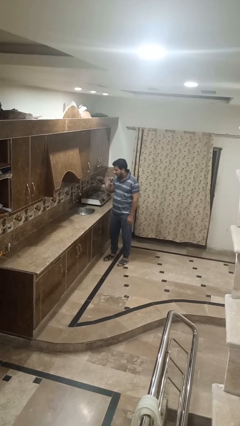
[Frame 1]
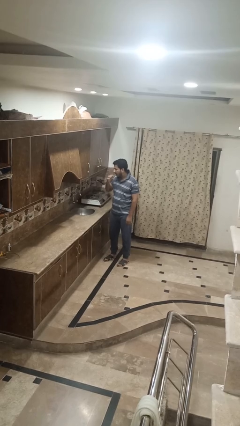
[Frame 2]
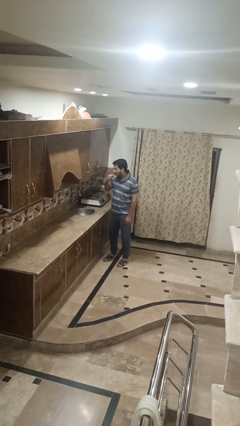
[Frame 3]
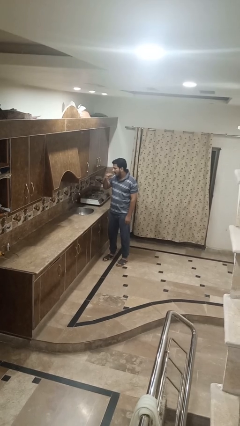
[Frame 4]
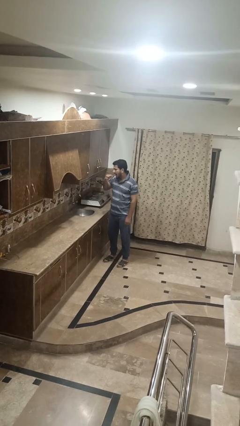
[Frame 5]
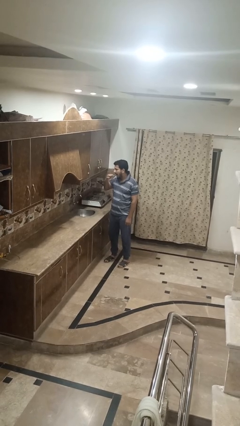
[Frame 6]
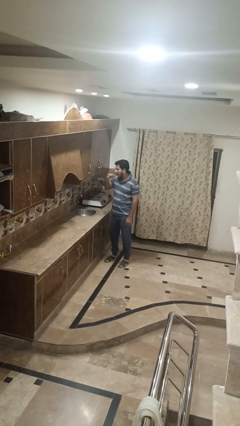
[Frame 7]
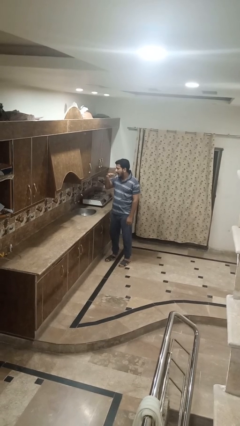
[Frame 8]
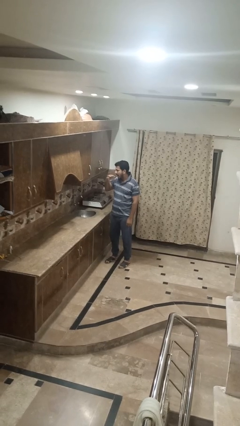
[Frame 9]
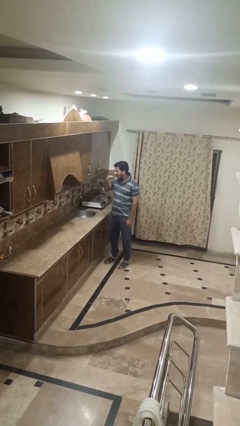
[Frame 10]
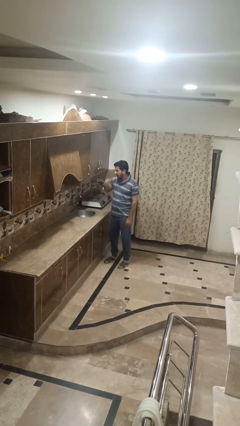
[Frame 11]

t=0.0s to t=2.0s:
person brushes teeth

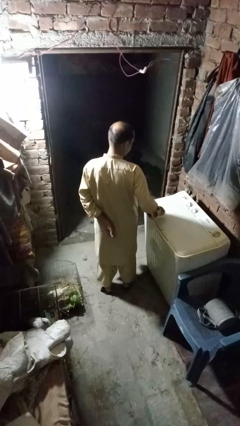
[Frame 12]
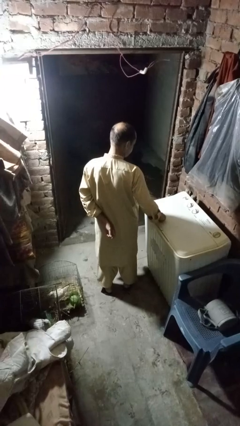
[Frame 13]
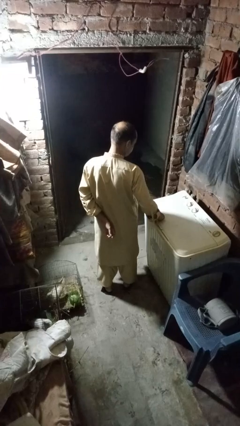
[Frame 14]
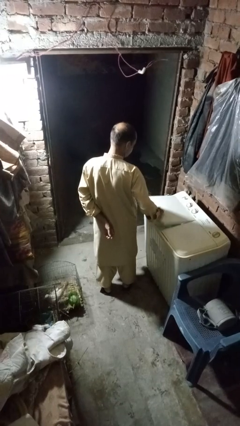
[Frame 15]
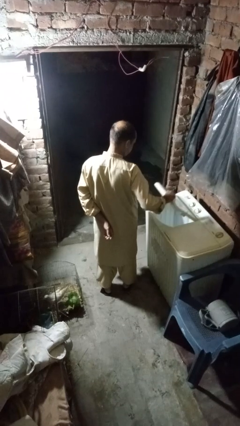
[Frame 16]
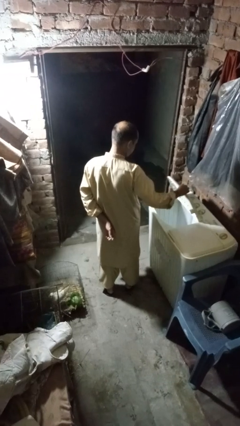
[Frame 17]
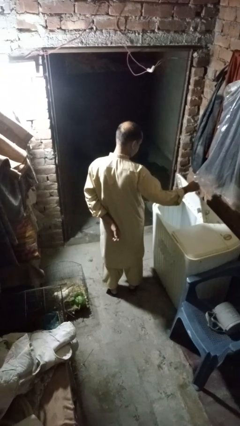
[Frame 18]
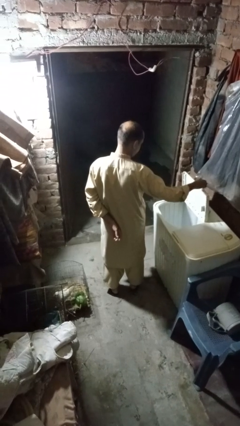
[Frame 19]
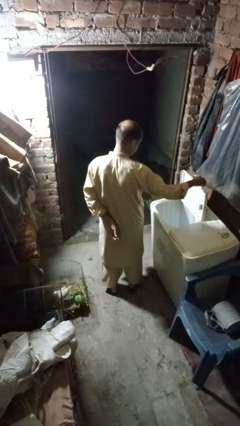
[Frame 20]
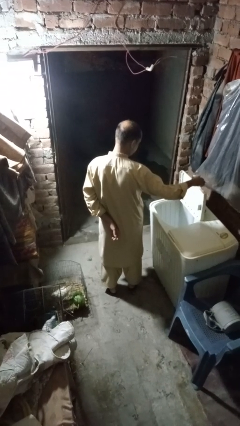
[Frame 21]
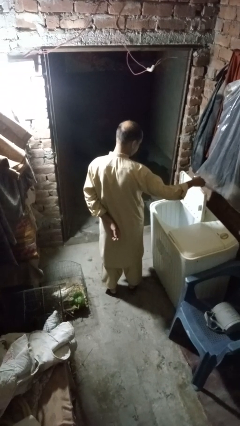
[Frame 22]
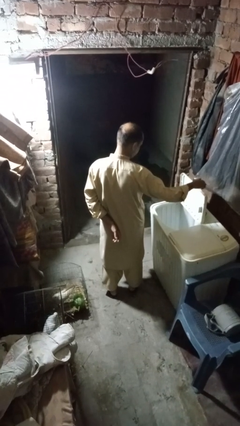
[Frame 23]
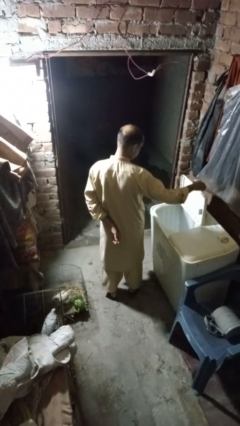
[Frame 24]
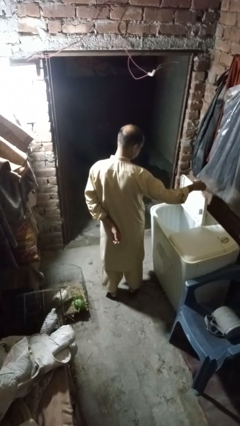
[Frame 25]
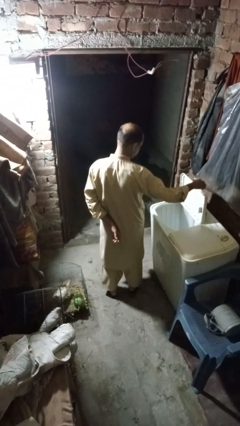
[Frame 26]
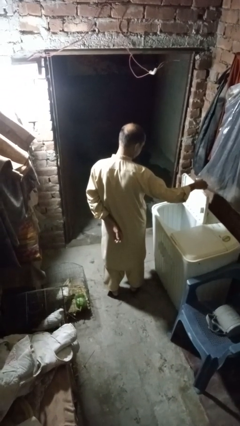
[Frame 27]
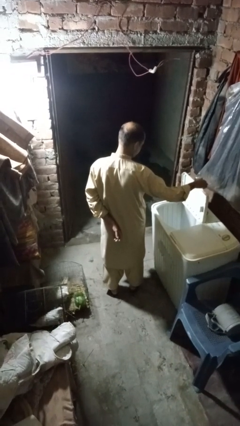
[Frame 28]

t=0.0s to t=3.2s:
person opens clothes washer

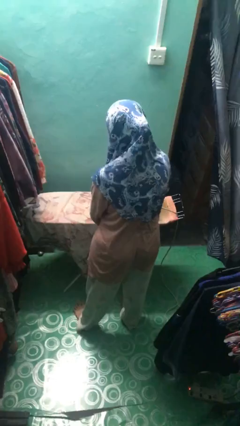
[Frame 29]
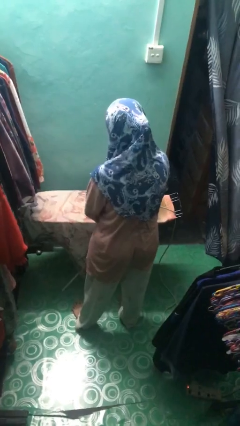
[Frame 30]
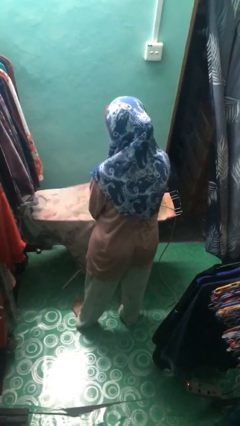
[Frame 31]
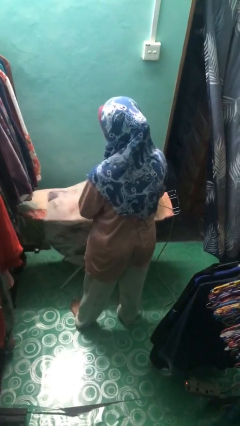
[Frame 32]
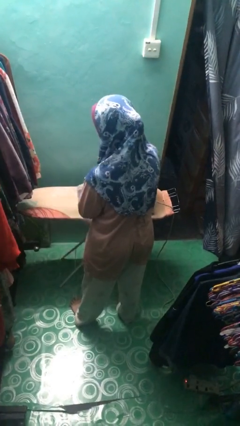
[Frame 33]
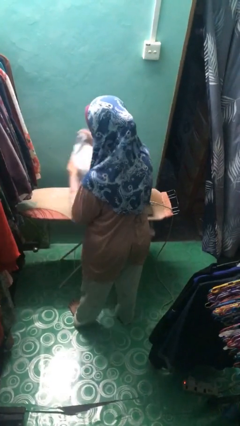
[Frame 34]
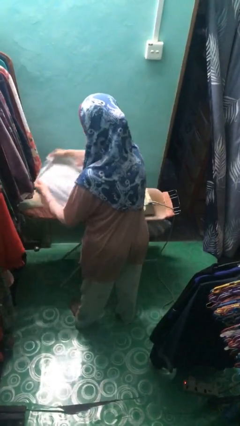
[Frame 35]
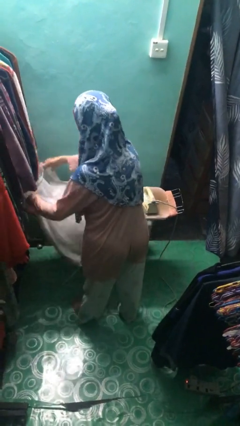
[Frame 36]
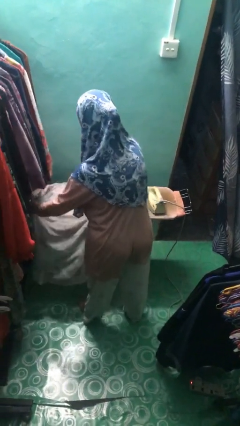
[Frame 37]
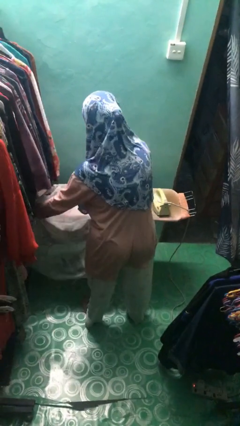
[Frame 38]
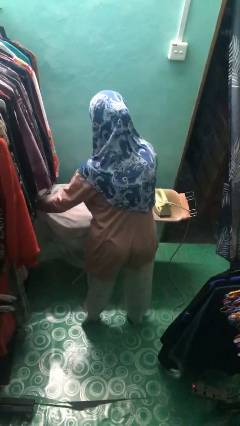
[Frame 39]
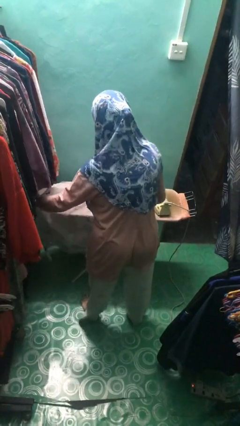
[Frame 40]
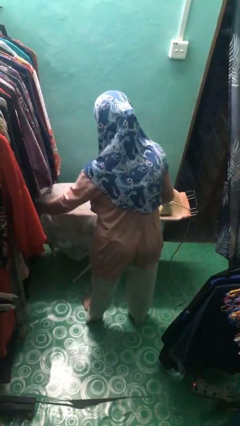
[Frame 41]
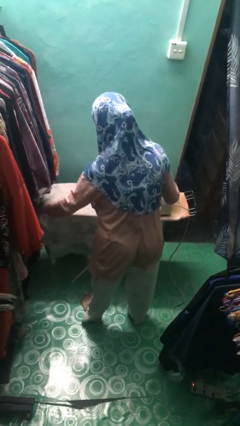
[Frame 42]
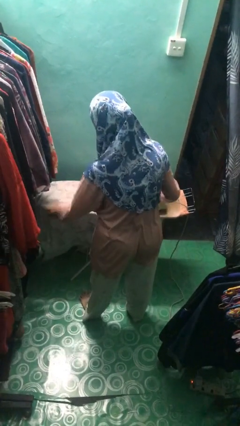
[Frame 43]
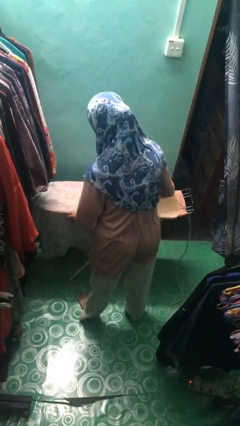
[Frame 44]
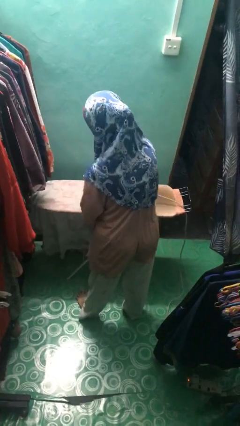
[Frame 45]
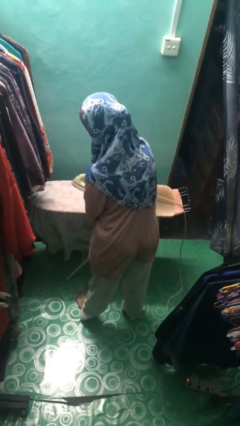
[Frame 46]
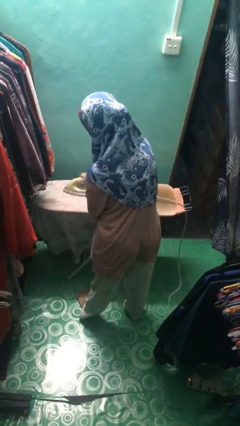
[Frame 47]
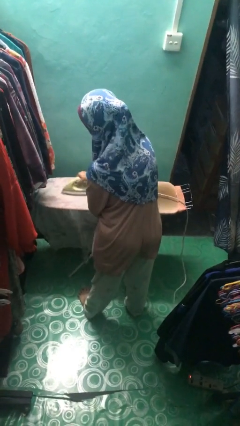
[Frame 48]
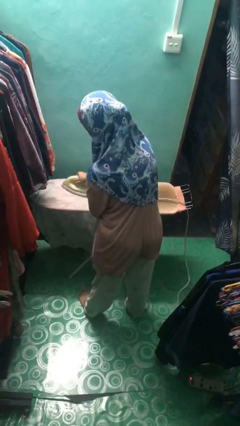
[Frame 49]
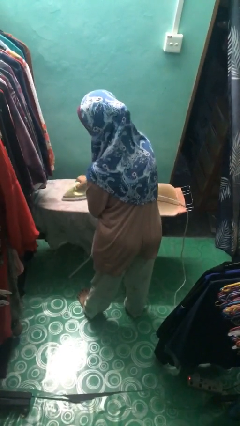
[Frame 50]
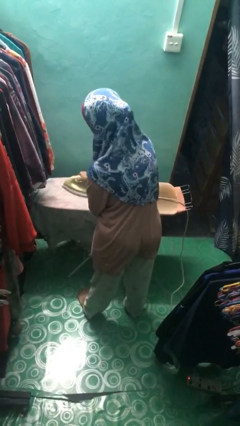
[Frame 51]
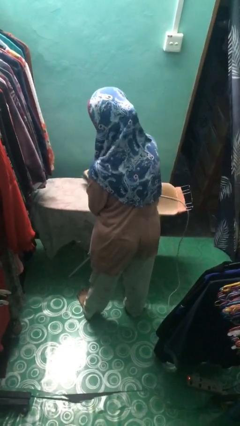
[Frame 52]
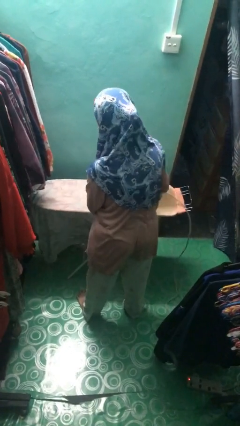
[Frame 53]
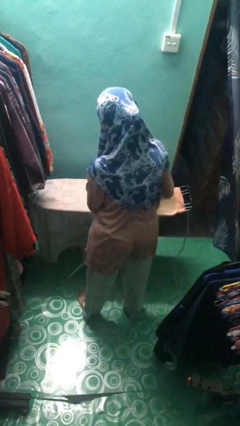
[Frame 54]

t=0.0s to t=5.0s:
person irons clothes

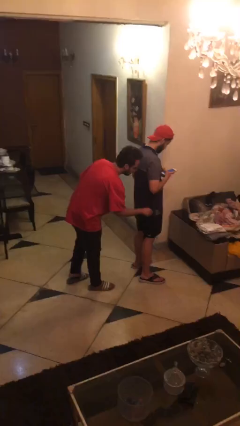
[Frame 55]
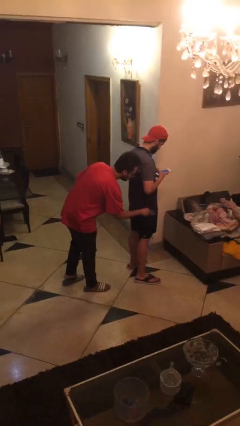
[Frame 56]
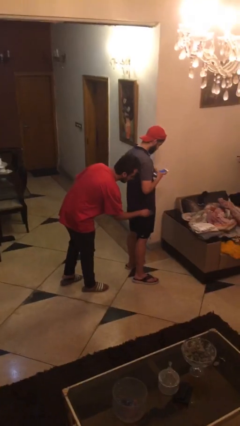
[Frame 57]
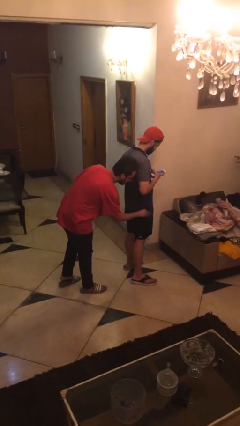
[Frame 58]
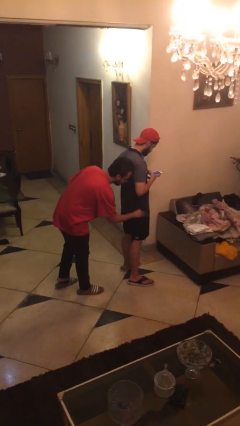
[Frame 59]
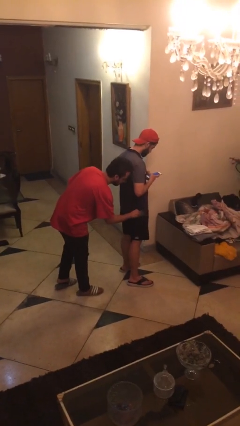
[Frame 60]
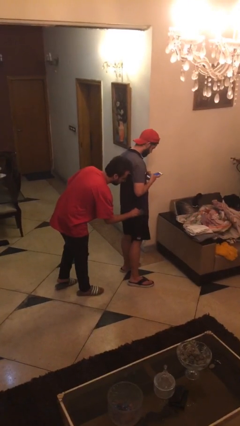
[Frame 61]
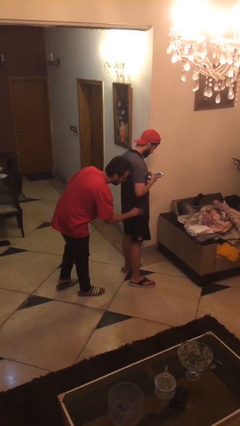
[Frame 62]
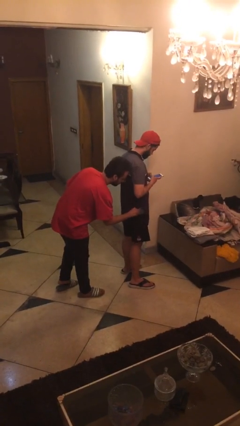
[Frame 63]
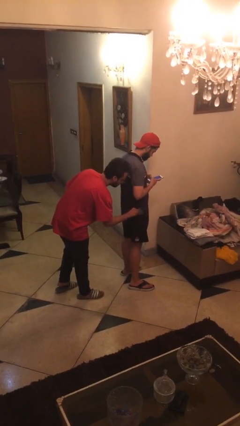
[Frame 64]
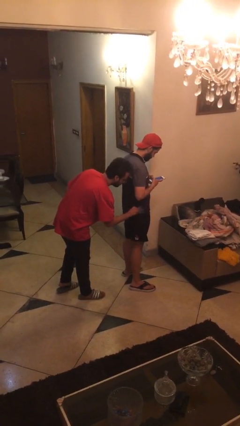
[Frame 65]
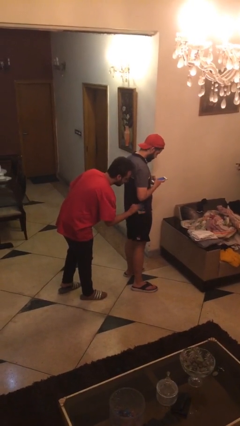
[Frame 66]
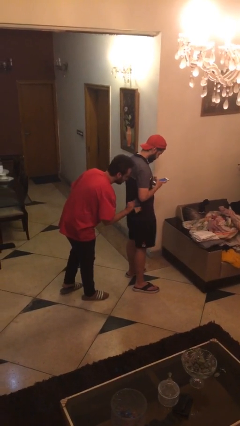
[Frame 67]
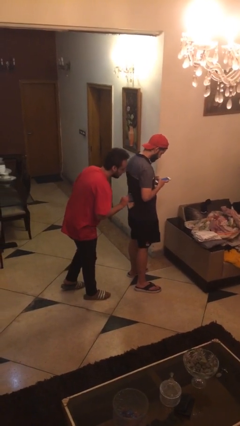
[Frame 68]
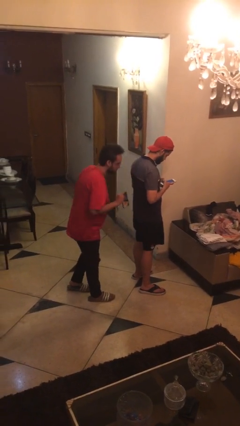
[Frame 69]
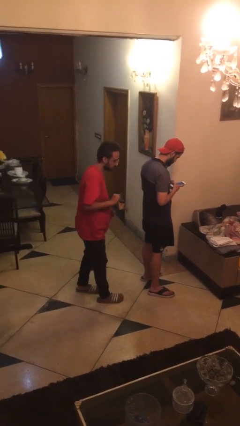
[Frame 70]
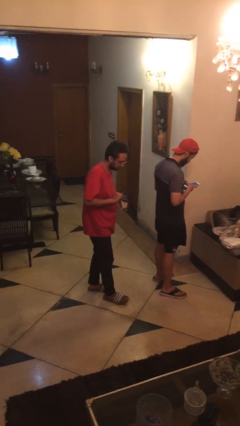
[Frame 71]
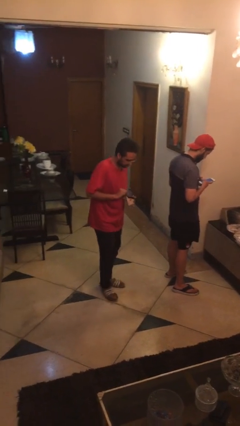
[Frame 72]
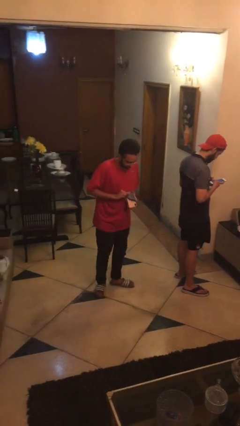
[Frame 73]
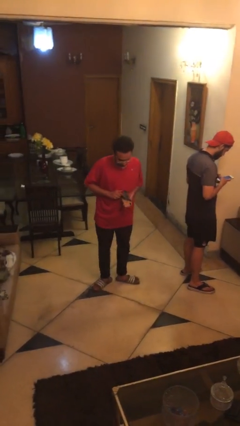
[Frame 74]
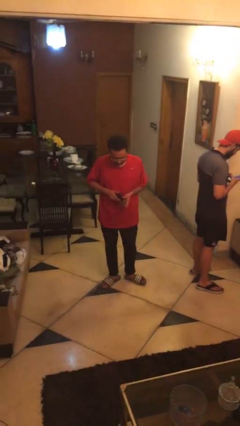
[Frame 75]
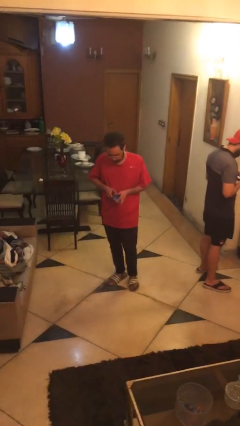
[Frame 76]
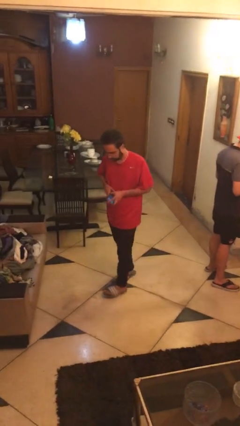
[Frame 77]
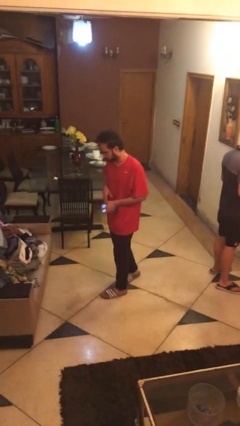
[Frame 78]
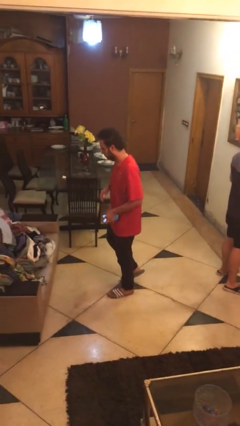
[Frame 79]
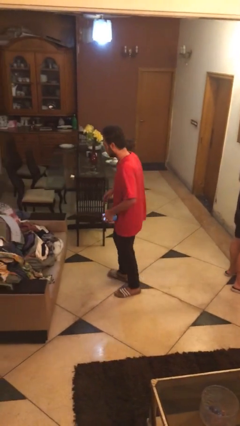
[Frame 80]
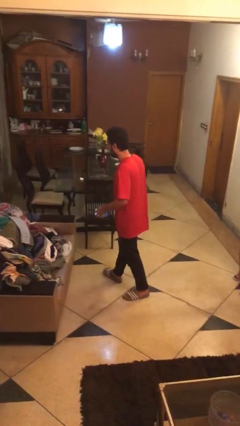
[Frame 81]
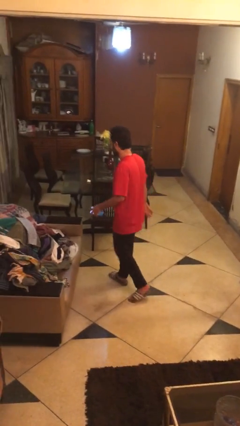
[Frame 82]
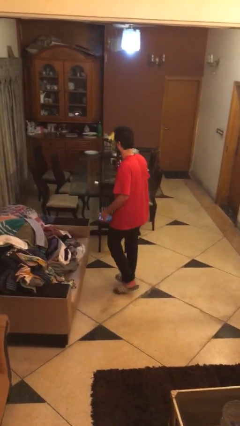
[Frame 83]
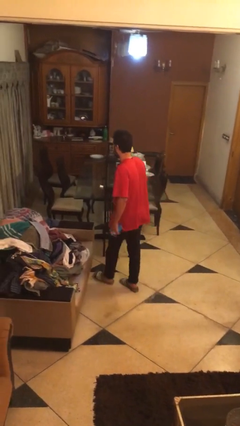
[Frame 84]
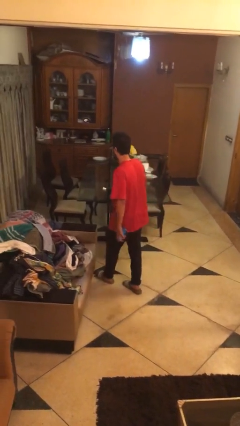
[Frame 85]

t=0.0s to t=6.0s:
person steals object from person

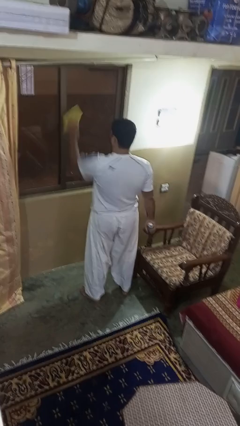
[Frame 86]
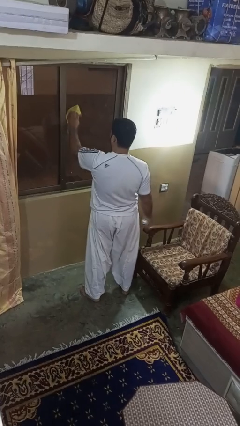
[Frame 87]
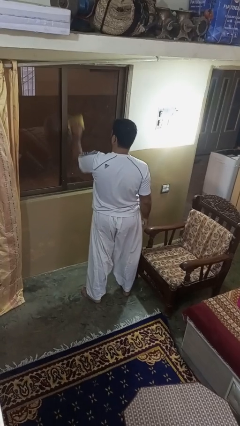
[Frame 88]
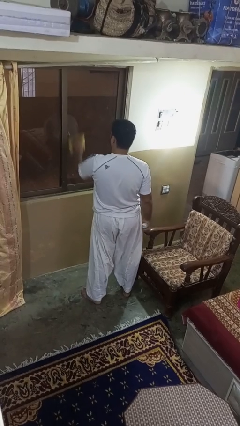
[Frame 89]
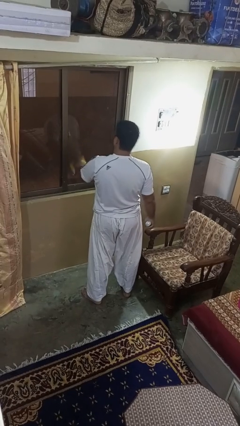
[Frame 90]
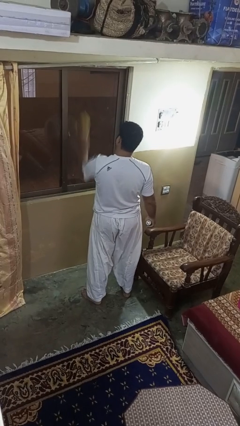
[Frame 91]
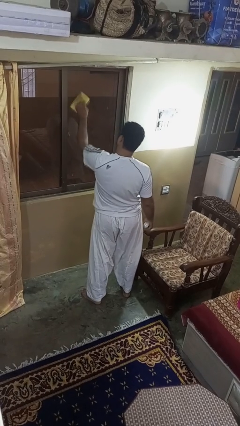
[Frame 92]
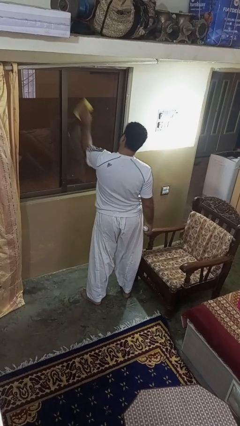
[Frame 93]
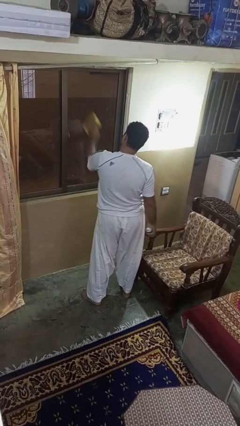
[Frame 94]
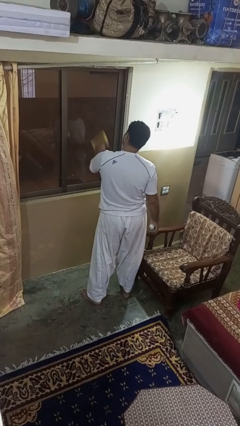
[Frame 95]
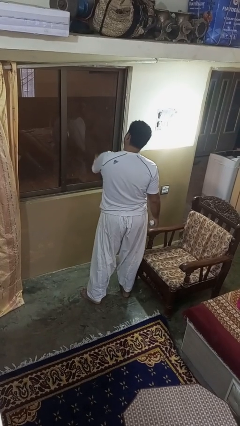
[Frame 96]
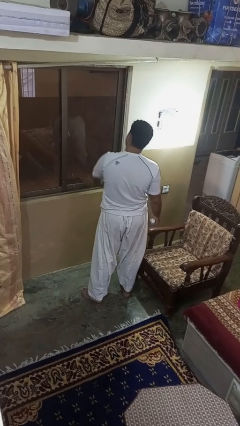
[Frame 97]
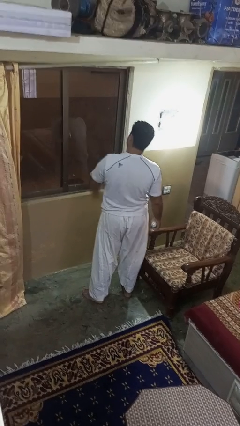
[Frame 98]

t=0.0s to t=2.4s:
person washes window
